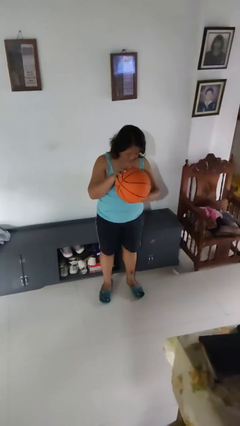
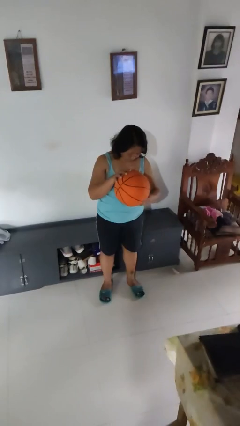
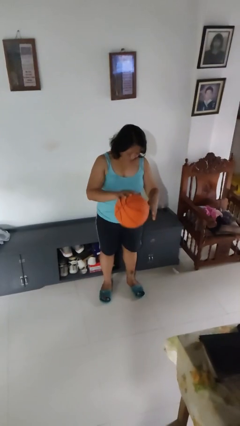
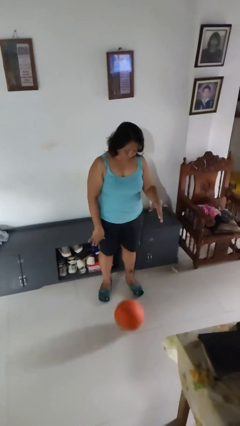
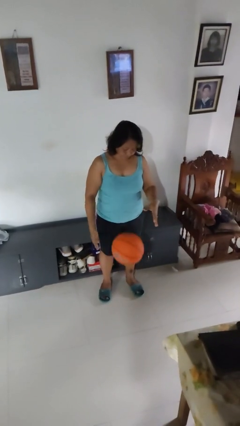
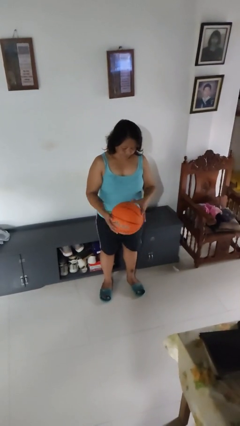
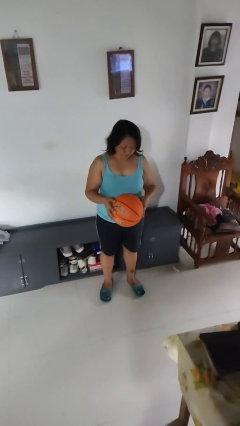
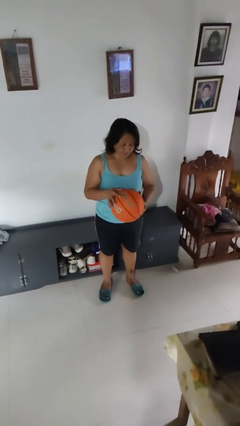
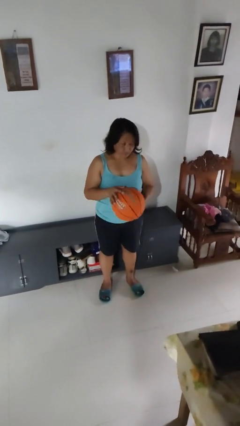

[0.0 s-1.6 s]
person bounces ball on floor

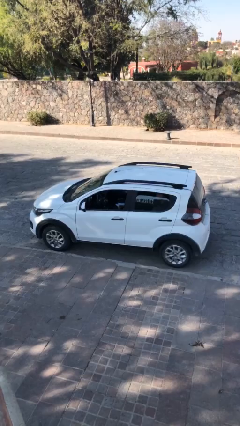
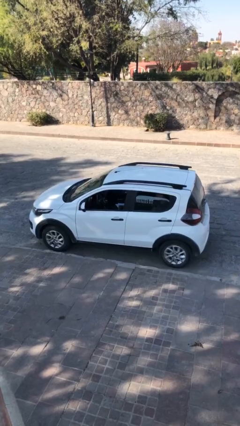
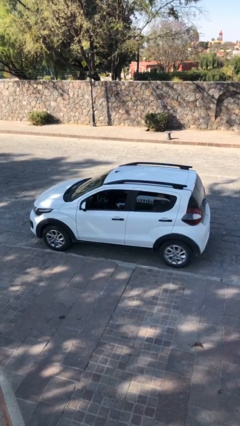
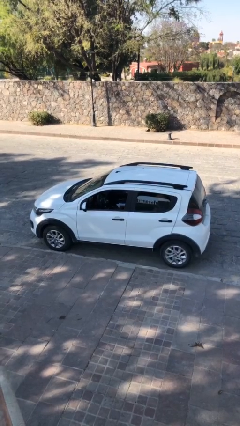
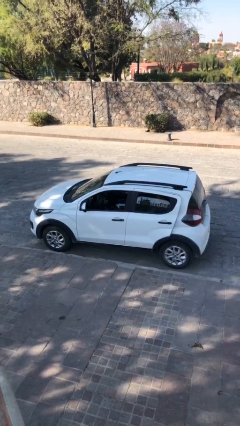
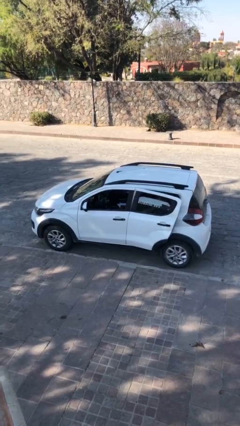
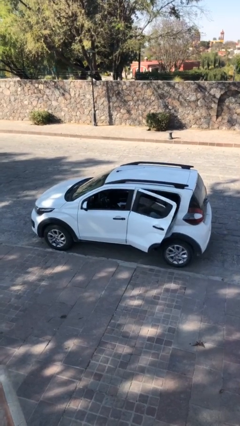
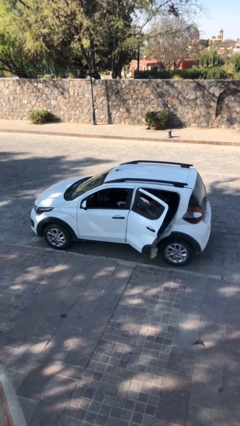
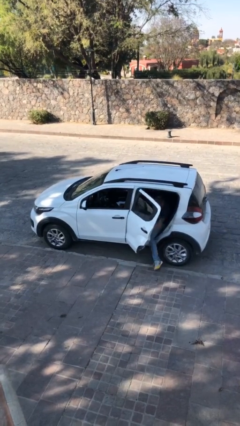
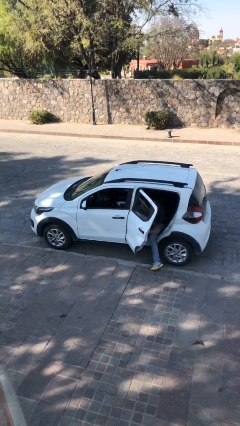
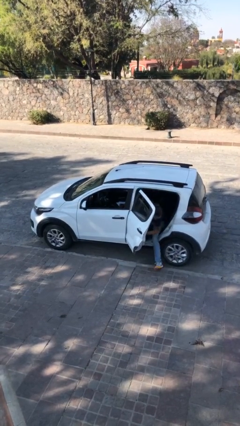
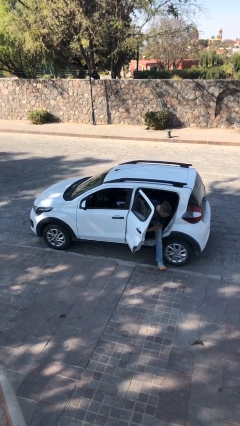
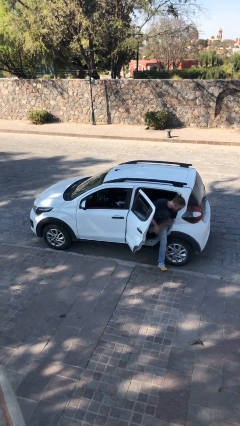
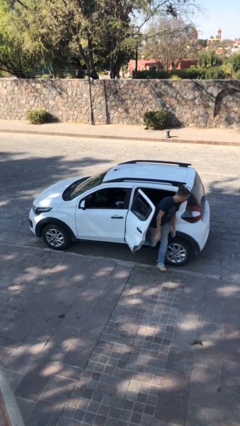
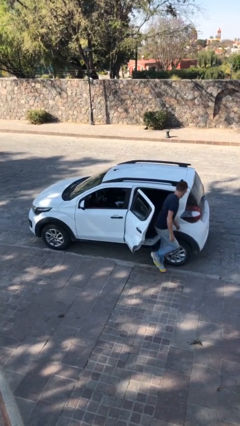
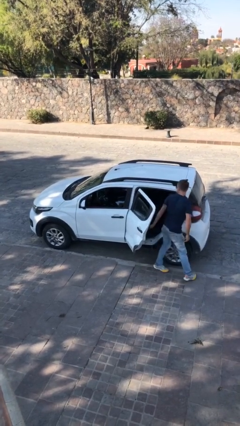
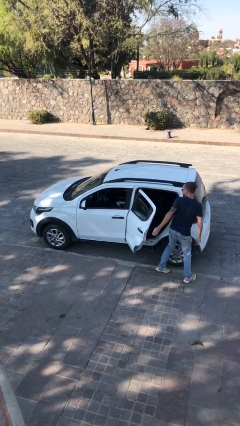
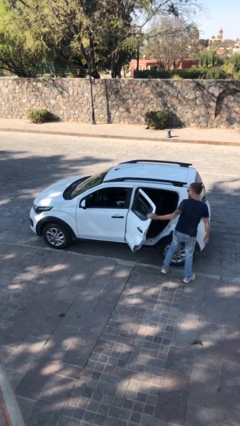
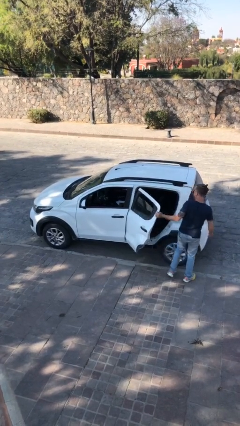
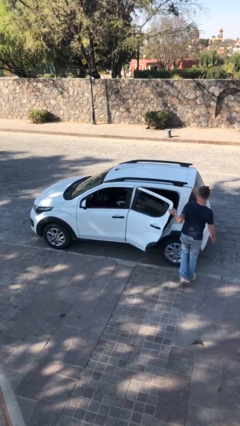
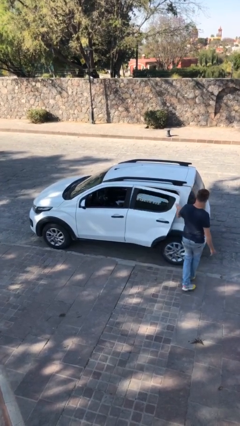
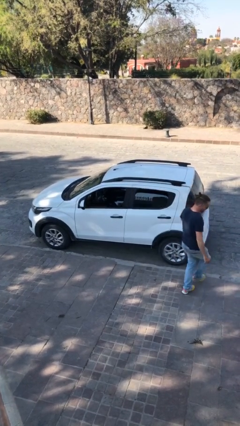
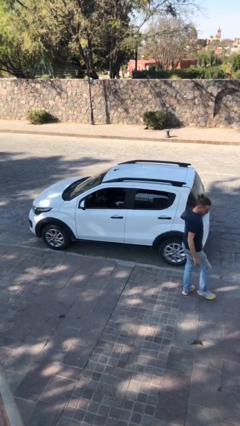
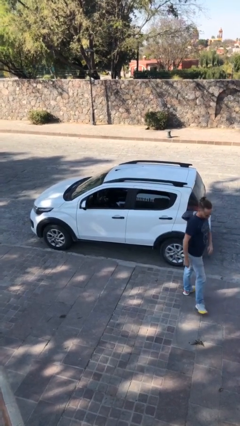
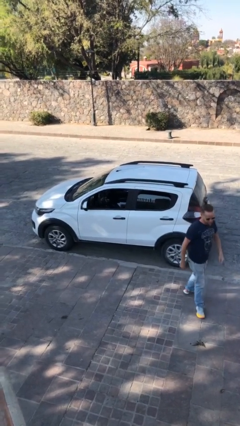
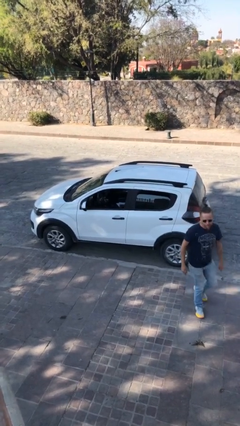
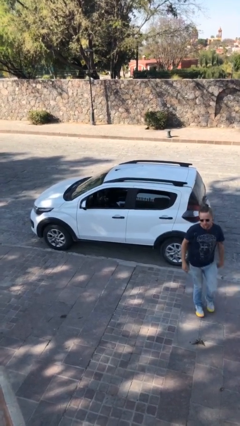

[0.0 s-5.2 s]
car drops off person

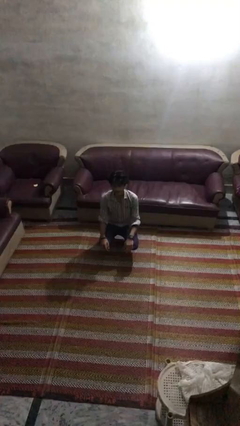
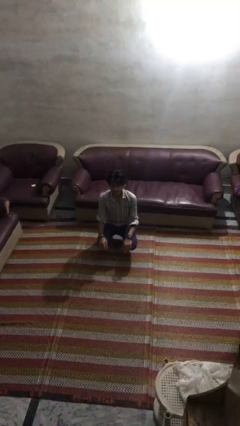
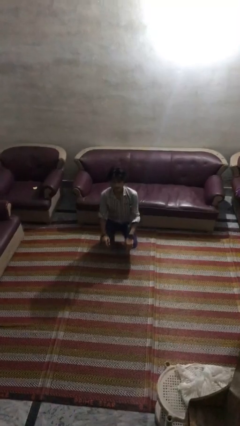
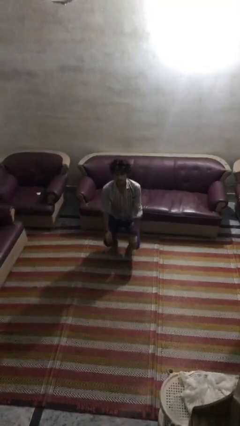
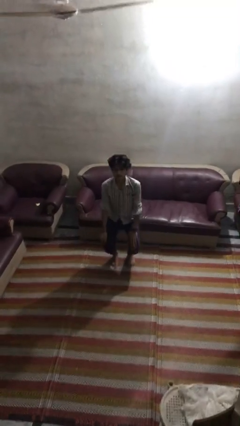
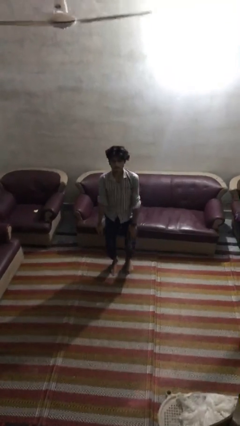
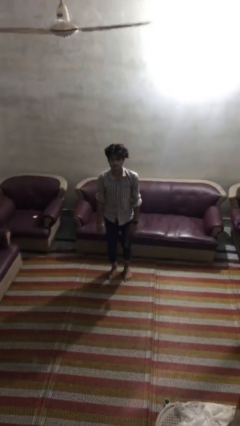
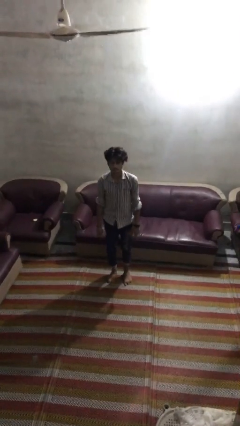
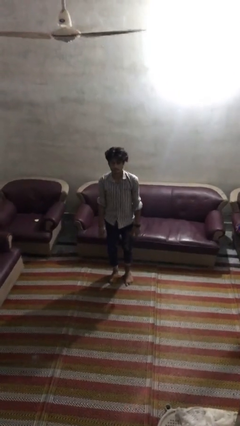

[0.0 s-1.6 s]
person stands up

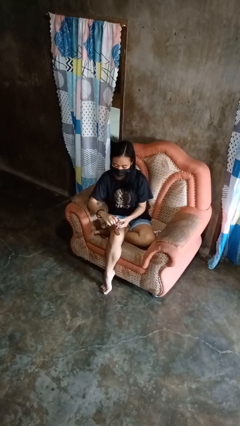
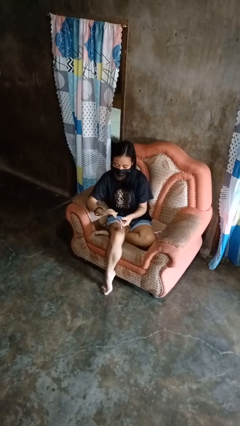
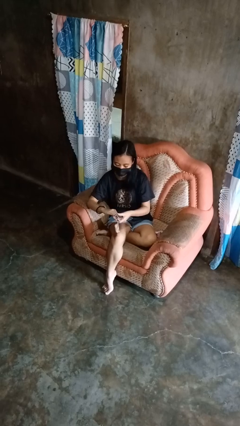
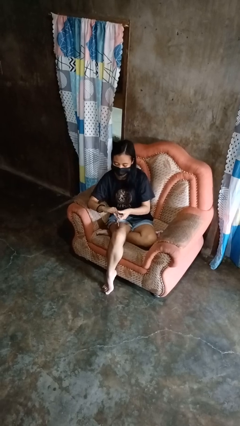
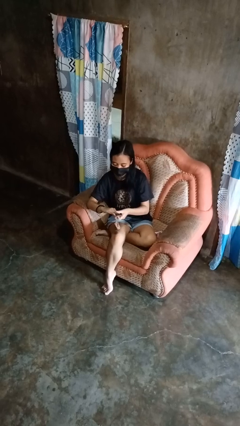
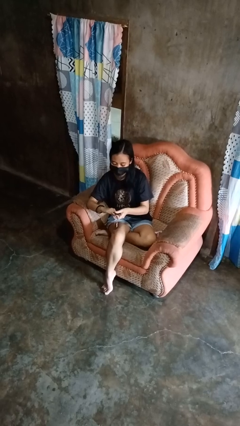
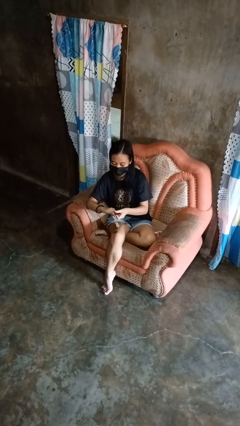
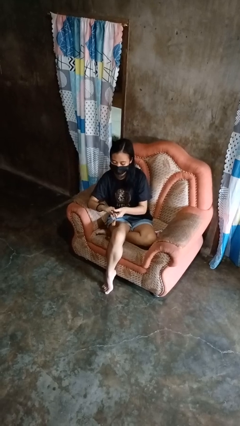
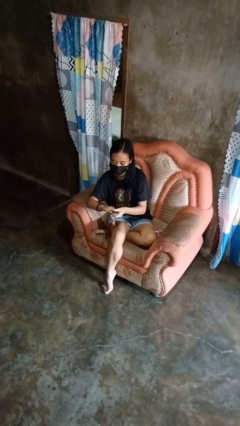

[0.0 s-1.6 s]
person clips fingernails

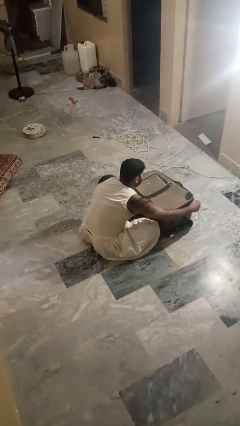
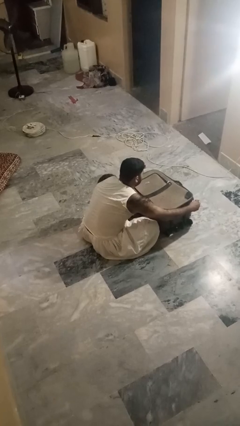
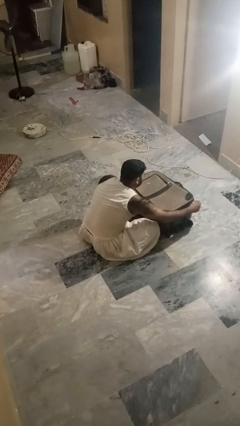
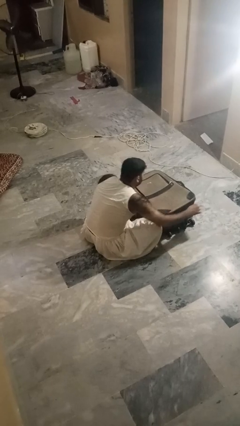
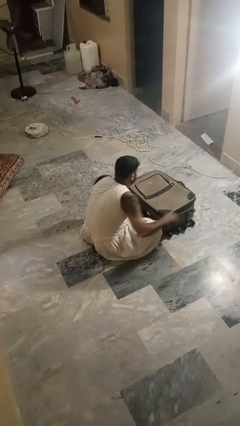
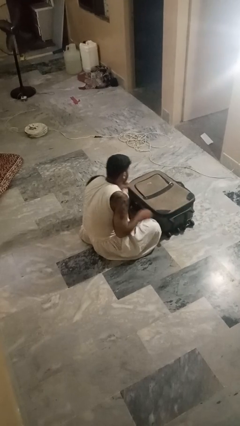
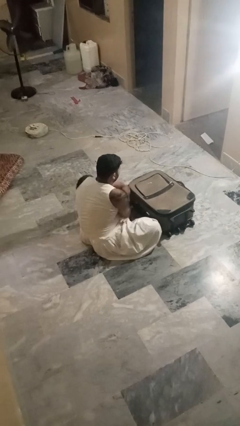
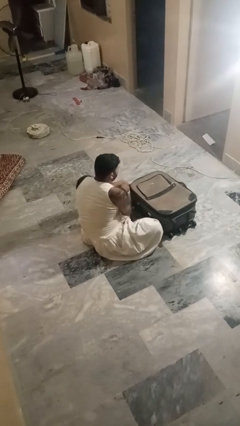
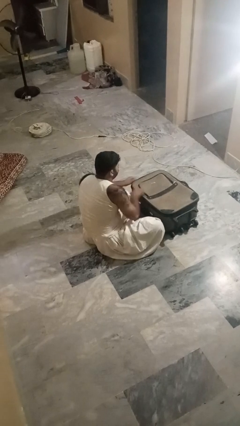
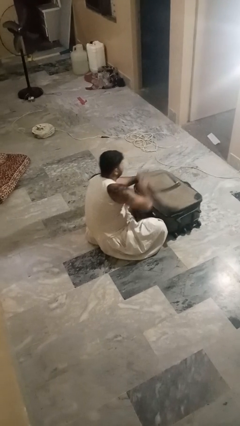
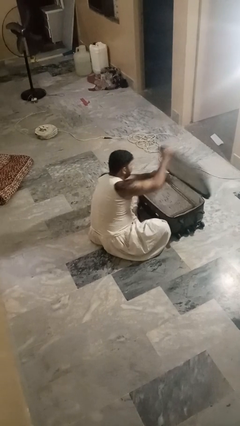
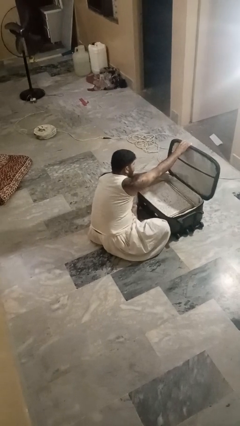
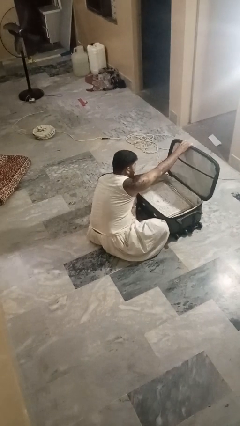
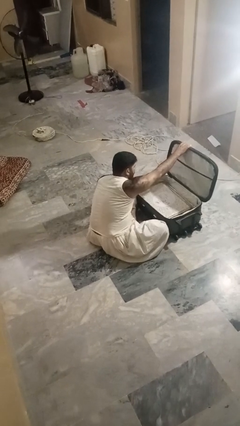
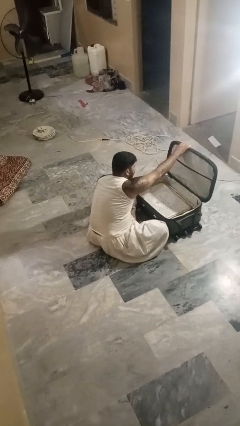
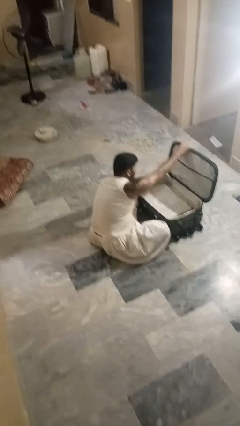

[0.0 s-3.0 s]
person opens suitcase

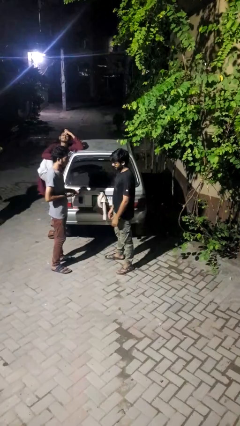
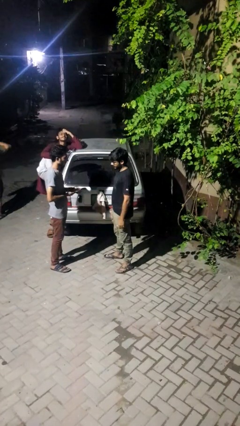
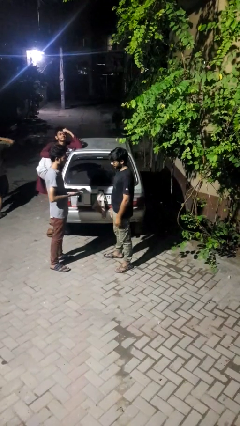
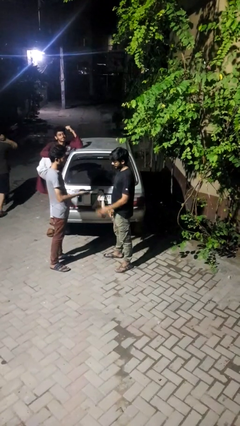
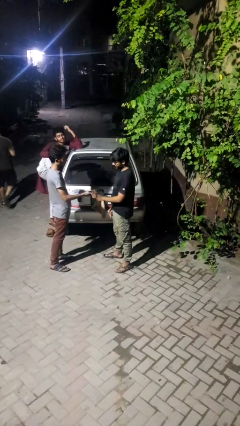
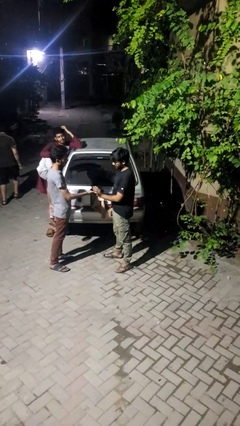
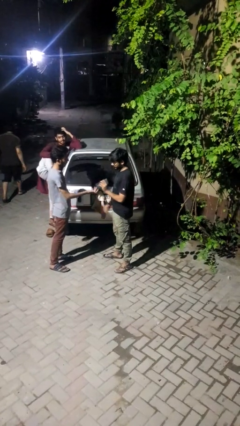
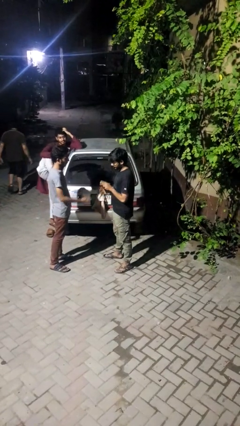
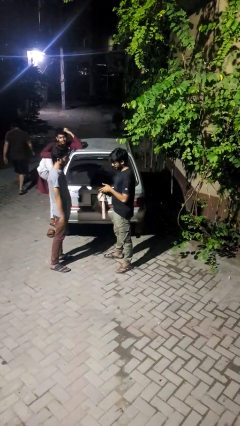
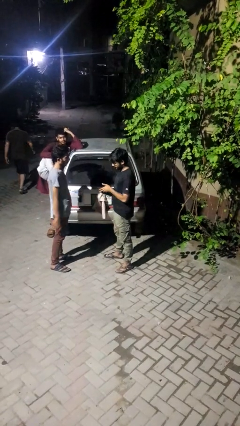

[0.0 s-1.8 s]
person transfers object to person

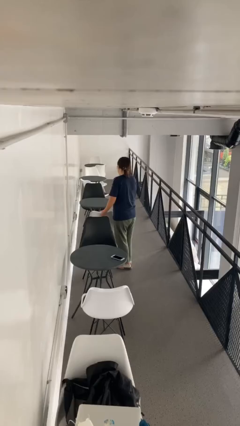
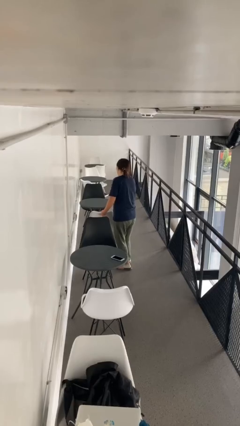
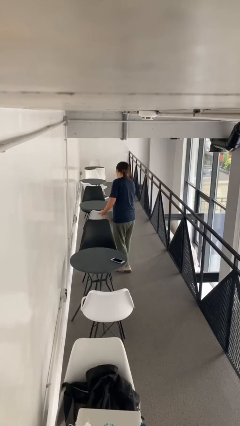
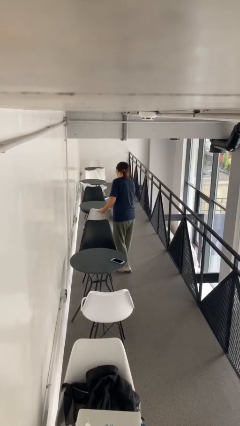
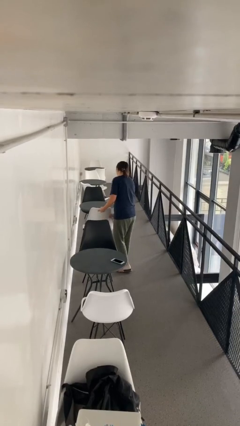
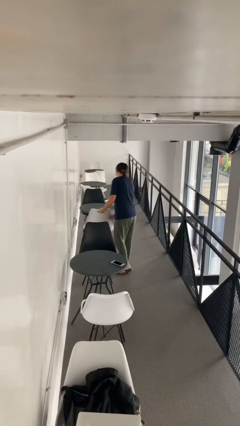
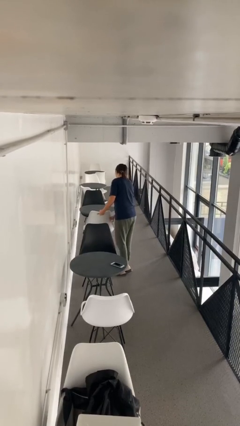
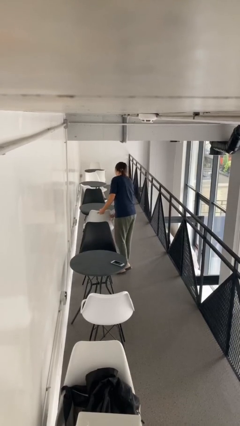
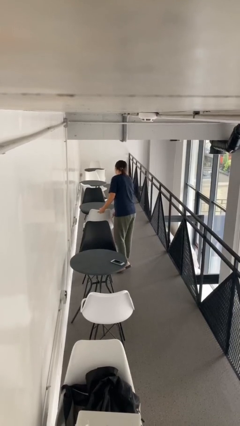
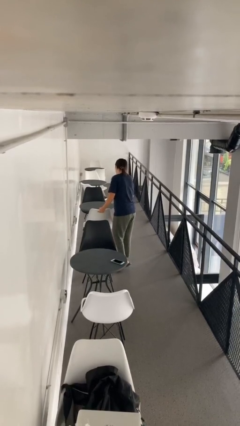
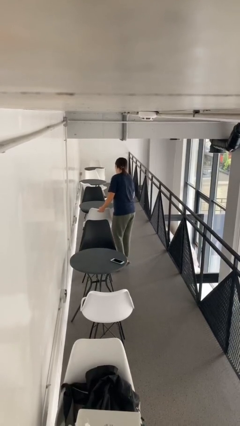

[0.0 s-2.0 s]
person pushes in chair
